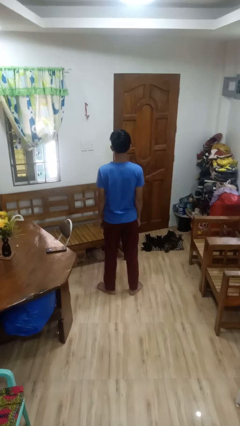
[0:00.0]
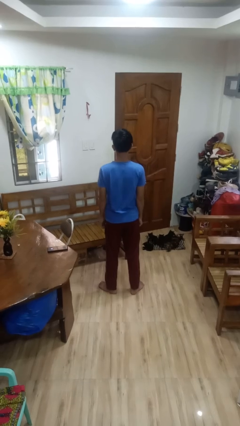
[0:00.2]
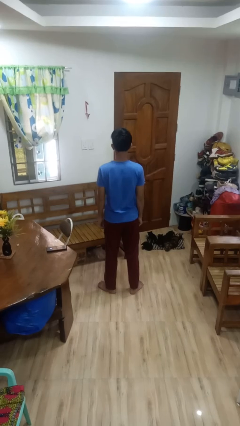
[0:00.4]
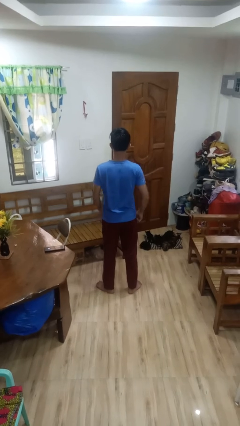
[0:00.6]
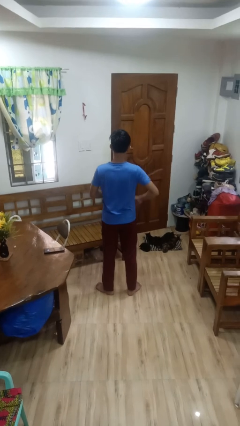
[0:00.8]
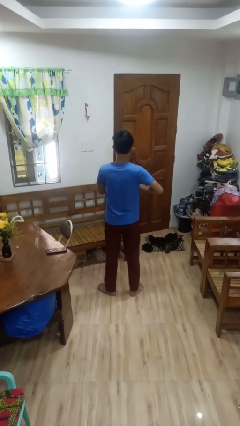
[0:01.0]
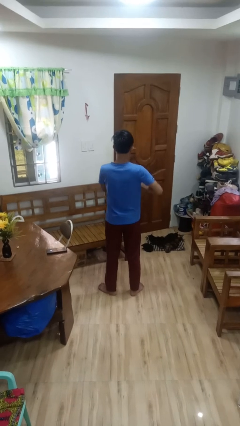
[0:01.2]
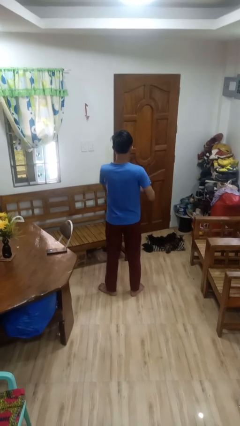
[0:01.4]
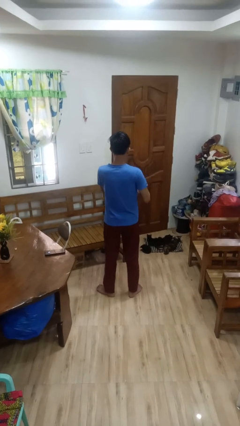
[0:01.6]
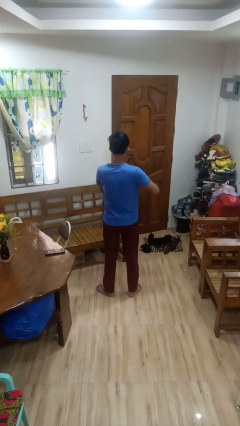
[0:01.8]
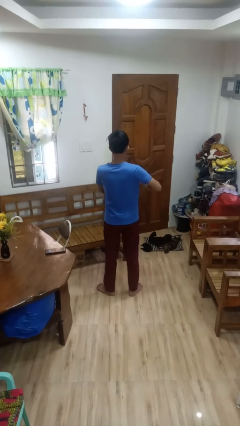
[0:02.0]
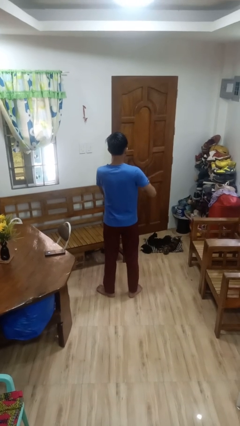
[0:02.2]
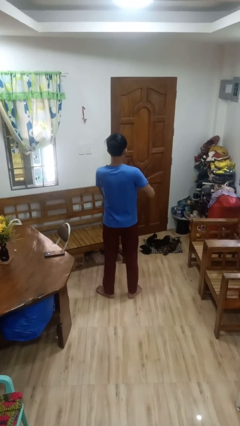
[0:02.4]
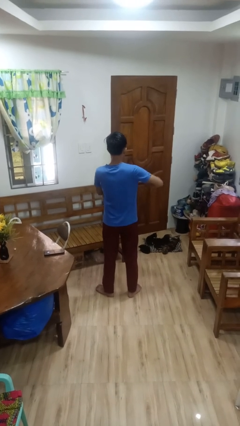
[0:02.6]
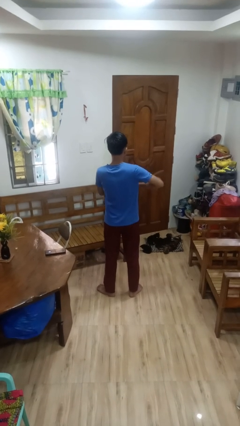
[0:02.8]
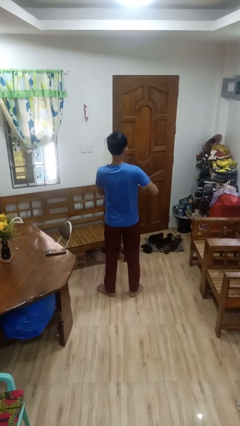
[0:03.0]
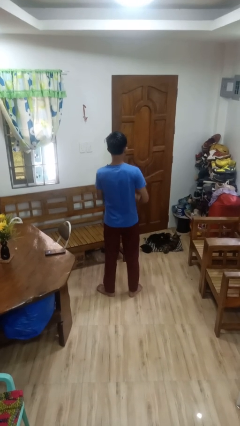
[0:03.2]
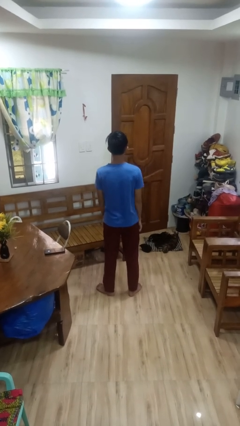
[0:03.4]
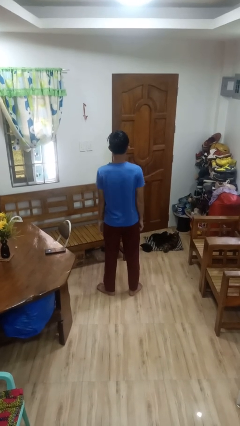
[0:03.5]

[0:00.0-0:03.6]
person cracks knuckles

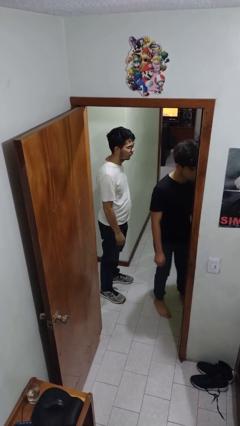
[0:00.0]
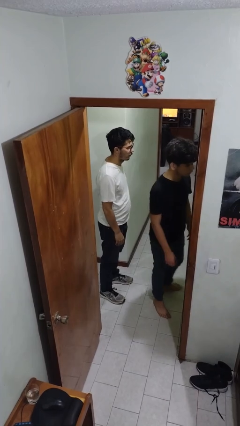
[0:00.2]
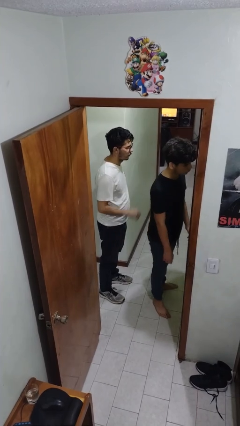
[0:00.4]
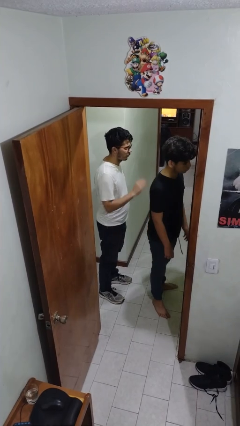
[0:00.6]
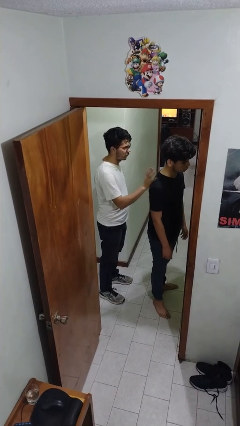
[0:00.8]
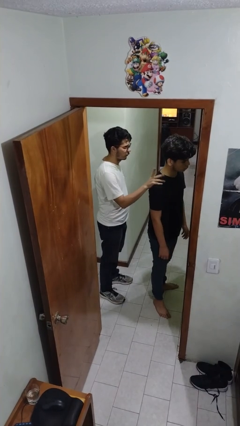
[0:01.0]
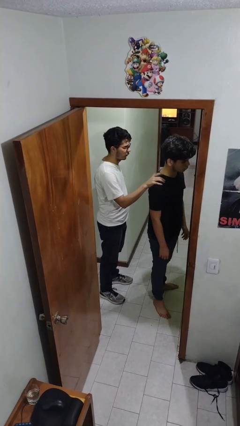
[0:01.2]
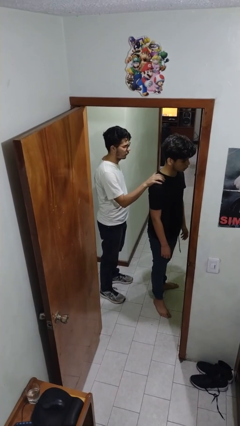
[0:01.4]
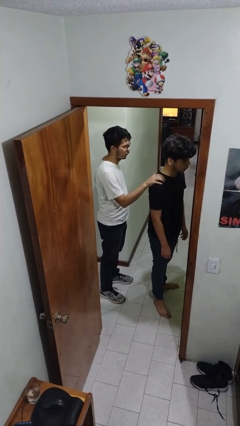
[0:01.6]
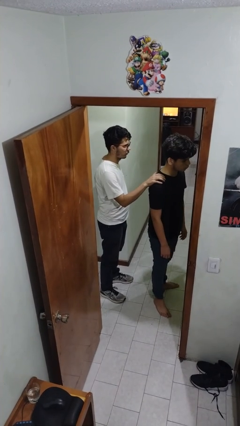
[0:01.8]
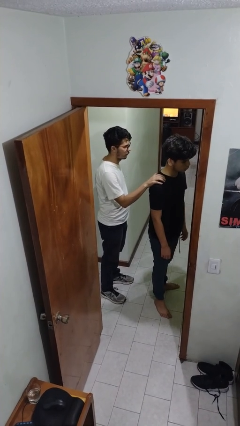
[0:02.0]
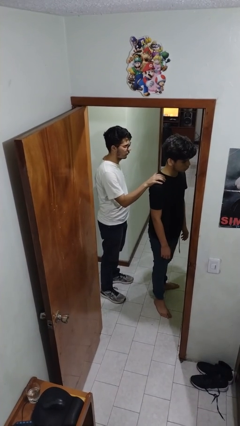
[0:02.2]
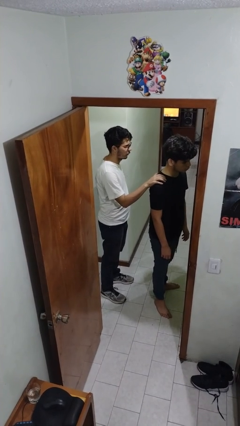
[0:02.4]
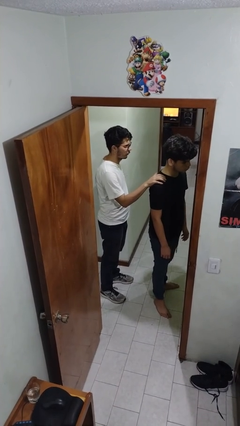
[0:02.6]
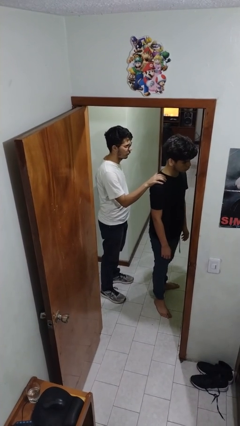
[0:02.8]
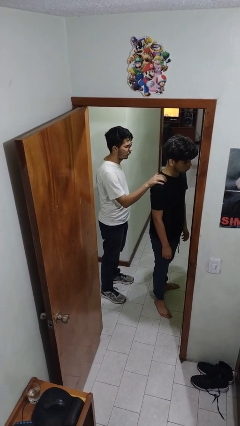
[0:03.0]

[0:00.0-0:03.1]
person grabs person by shoulder

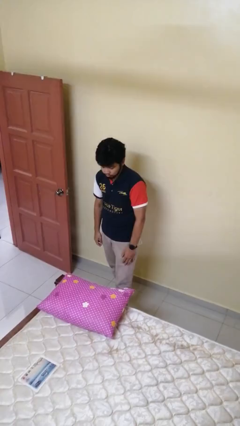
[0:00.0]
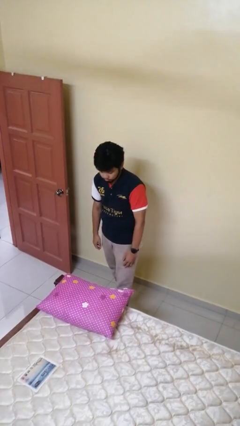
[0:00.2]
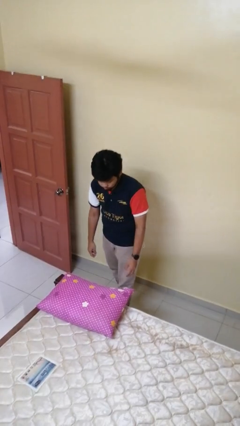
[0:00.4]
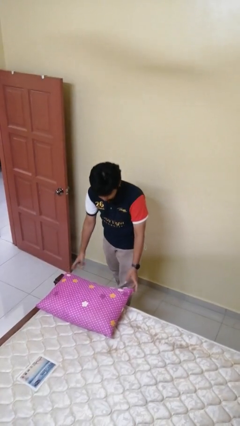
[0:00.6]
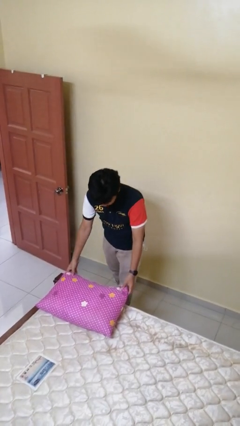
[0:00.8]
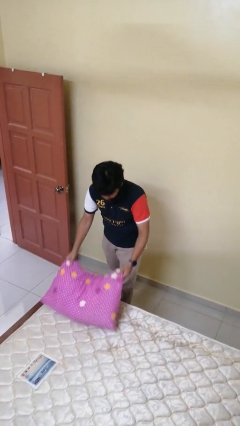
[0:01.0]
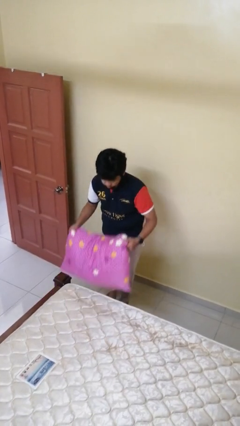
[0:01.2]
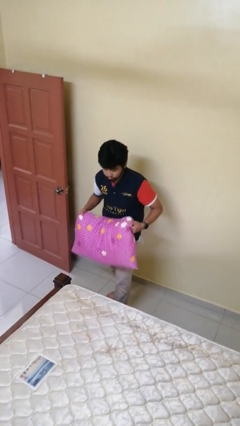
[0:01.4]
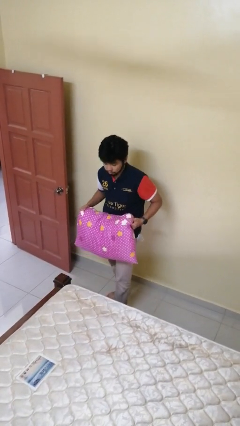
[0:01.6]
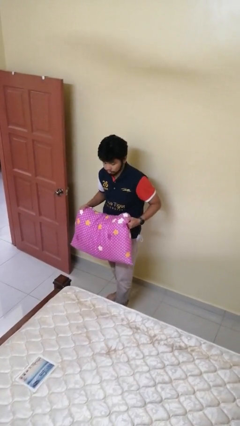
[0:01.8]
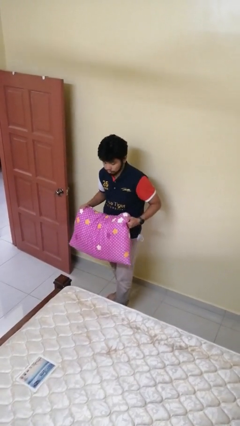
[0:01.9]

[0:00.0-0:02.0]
person picks up object from bed

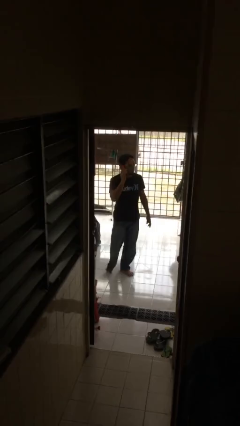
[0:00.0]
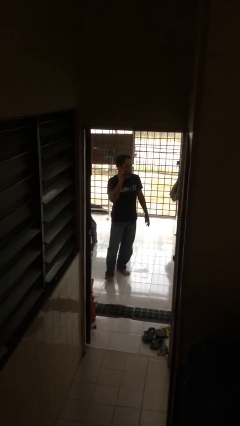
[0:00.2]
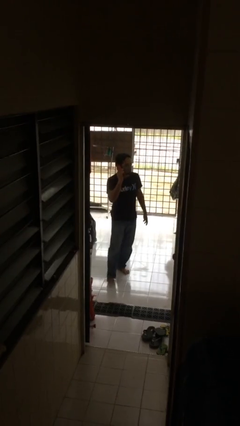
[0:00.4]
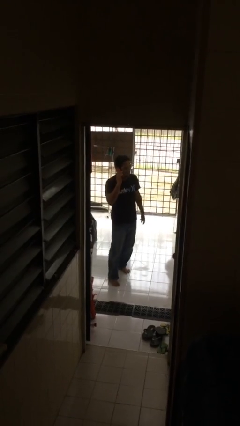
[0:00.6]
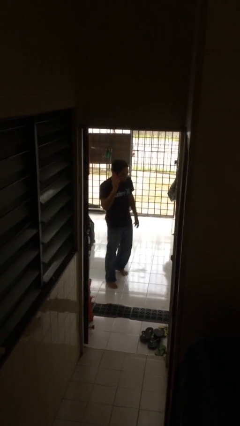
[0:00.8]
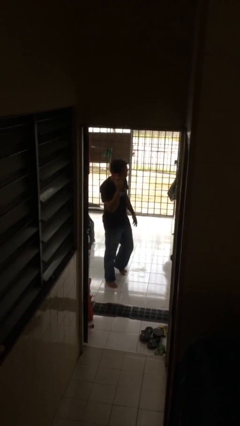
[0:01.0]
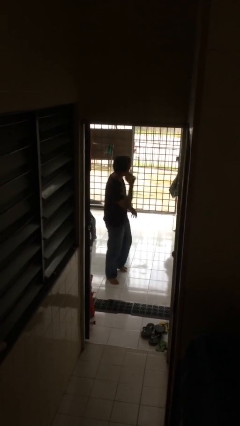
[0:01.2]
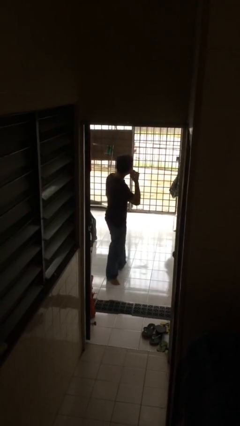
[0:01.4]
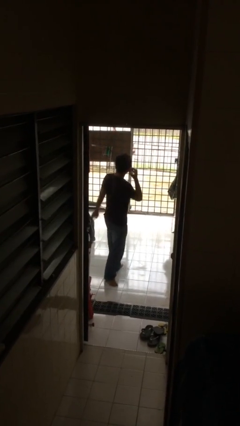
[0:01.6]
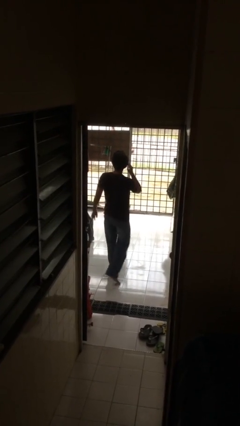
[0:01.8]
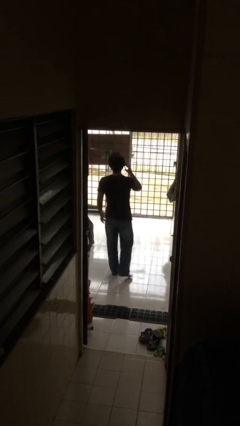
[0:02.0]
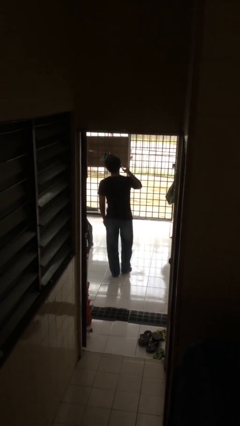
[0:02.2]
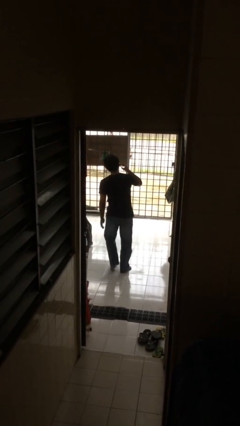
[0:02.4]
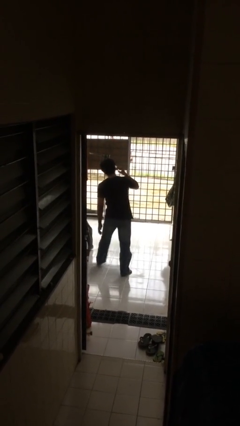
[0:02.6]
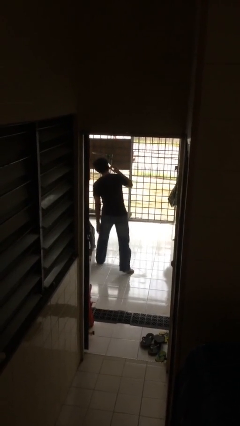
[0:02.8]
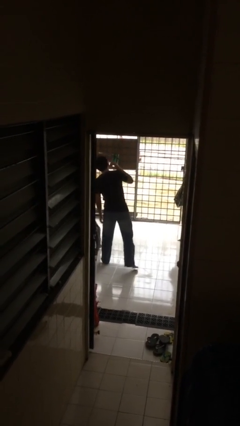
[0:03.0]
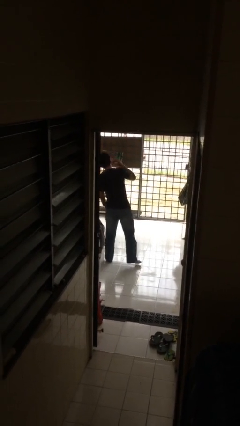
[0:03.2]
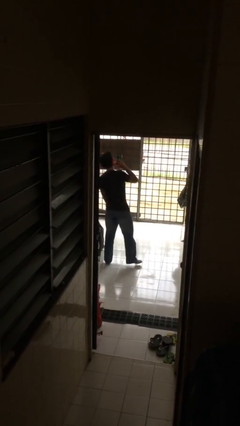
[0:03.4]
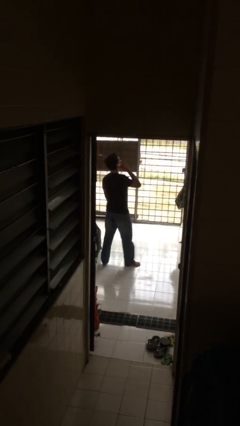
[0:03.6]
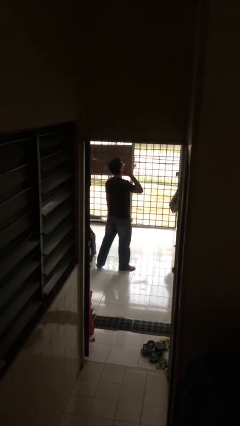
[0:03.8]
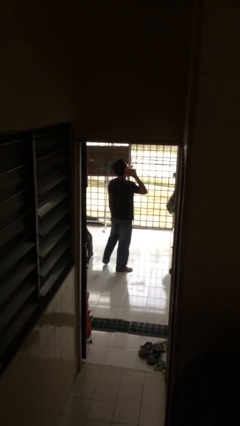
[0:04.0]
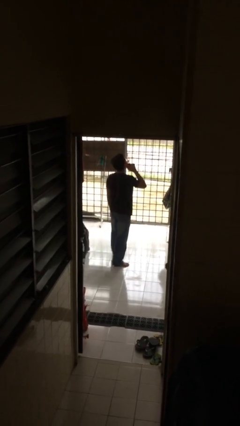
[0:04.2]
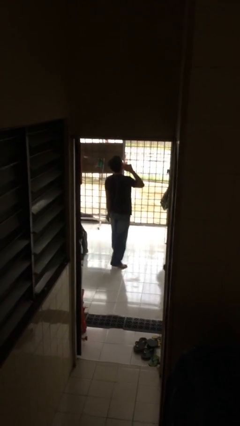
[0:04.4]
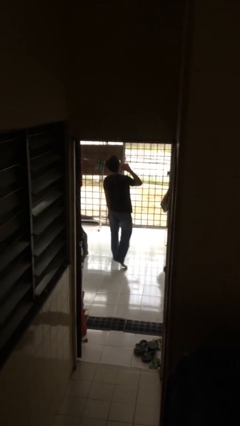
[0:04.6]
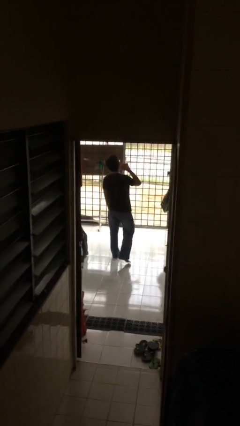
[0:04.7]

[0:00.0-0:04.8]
person talks on phone

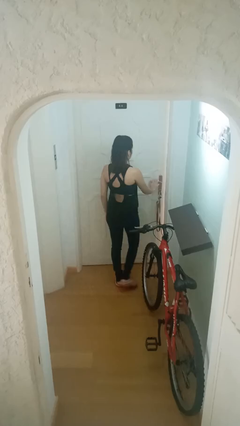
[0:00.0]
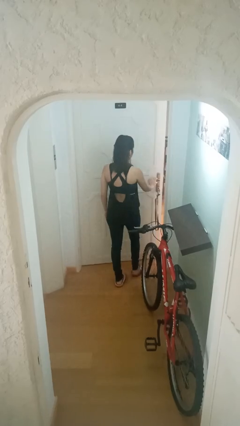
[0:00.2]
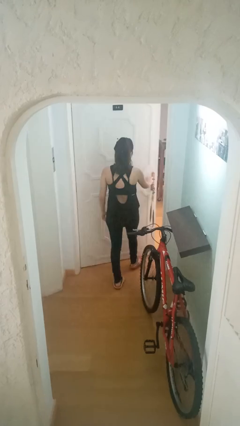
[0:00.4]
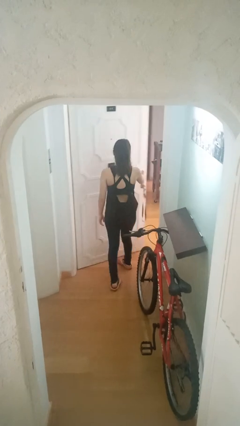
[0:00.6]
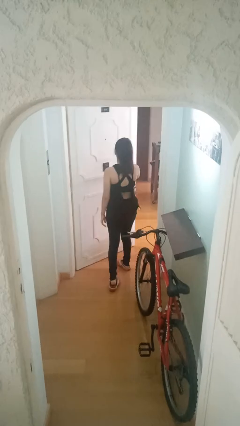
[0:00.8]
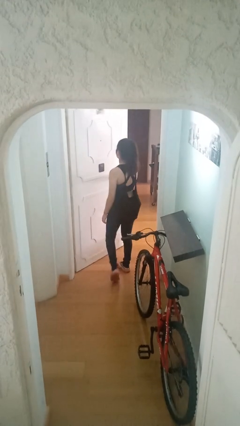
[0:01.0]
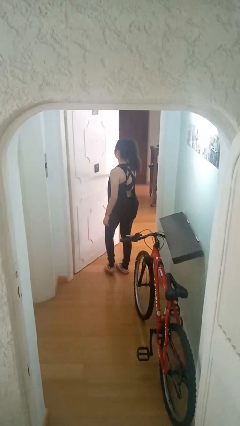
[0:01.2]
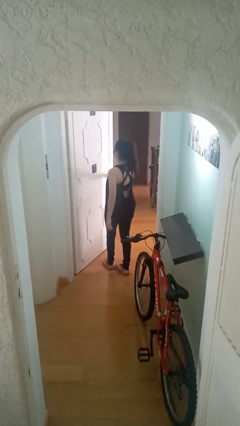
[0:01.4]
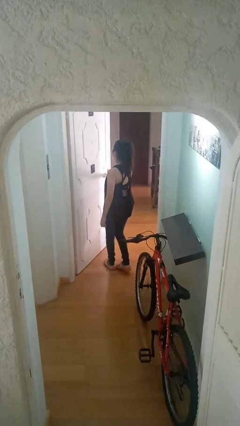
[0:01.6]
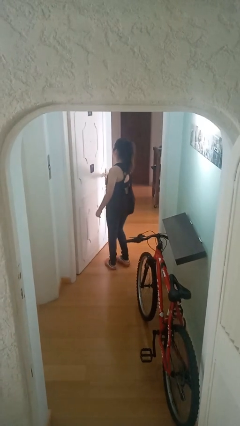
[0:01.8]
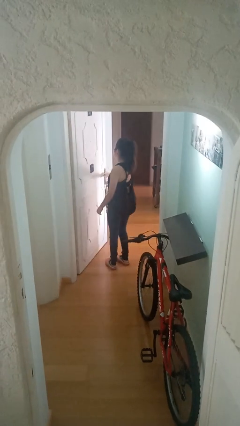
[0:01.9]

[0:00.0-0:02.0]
person opens facility door

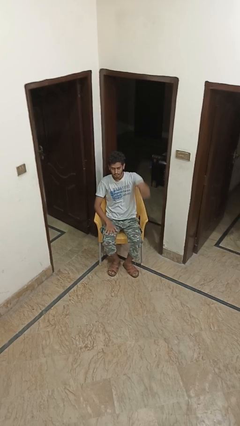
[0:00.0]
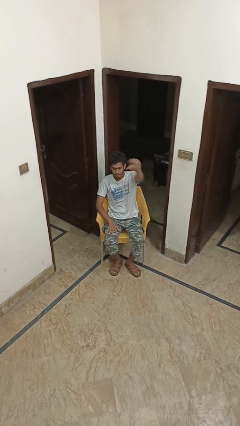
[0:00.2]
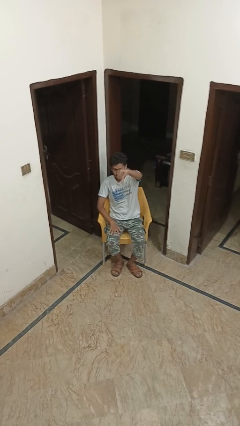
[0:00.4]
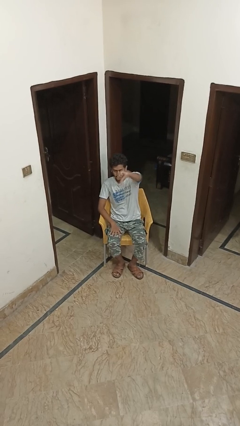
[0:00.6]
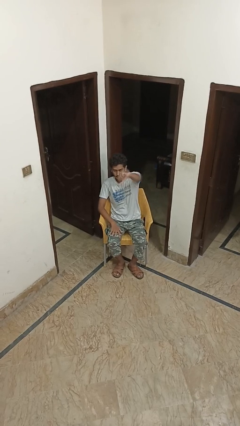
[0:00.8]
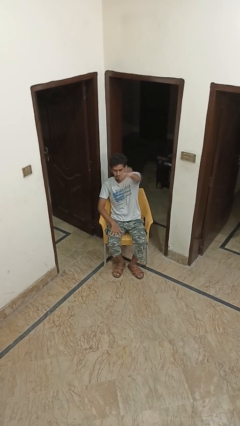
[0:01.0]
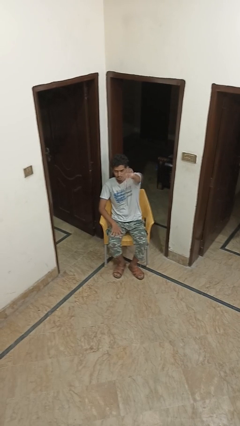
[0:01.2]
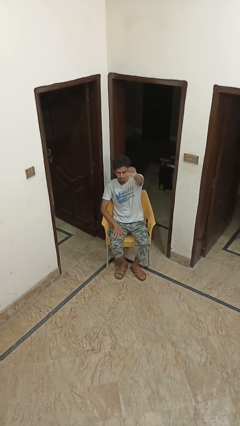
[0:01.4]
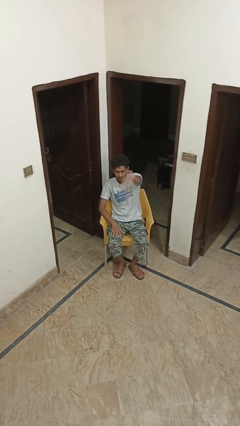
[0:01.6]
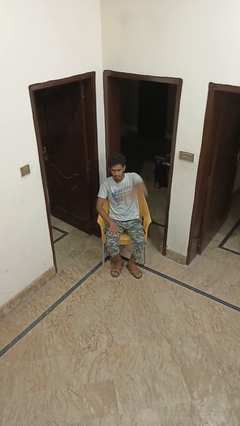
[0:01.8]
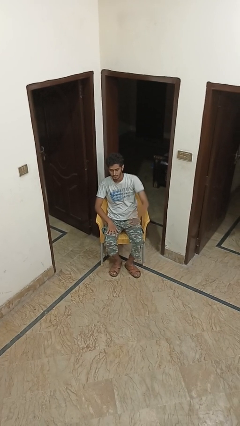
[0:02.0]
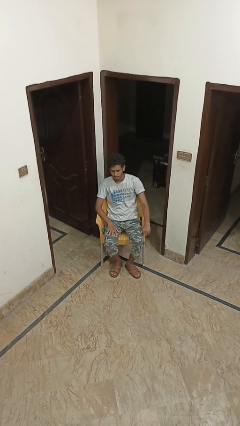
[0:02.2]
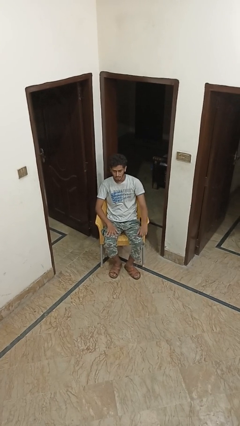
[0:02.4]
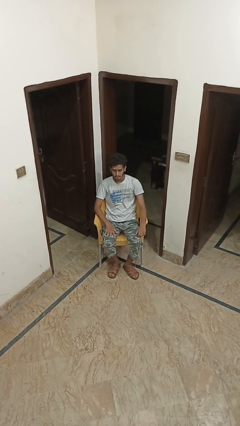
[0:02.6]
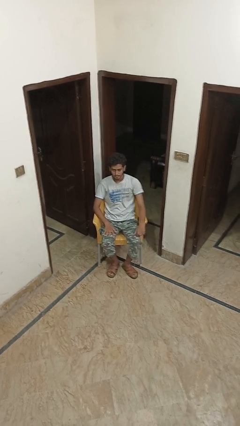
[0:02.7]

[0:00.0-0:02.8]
person gestures thumbs down
